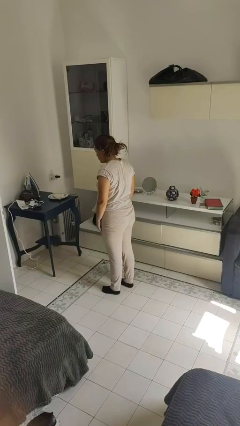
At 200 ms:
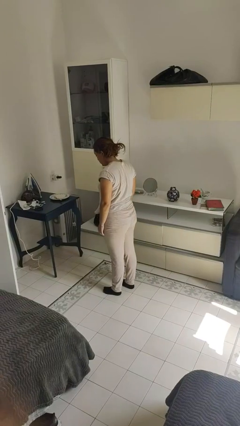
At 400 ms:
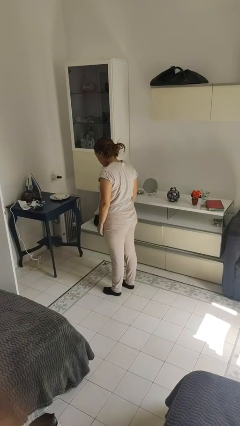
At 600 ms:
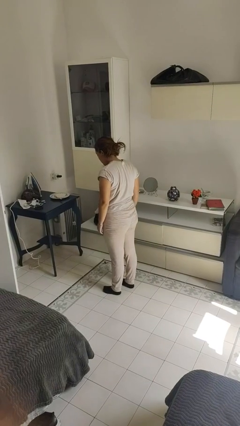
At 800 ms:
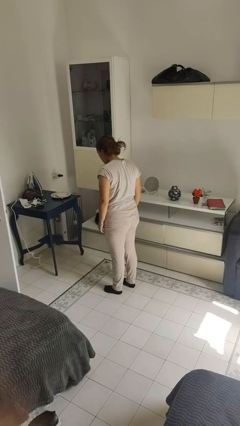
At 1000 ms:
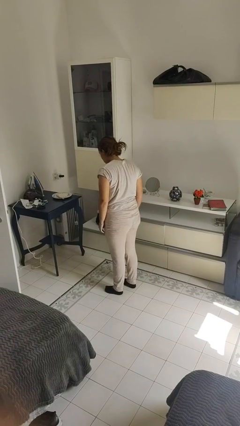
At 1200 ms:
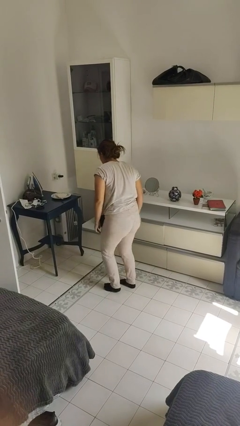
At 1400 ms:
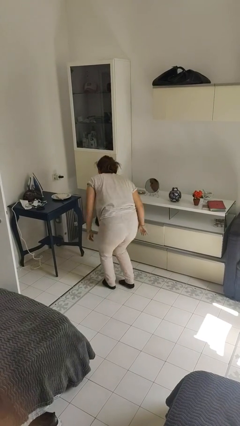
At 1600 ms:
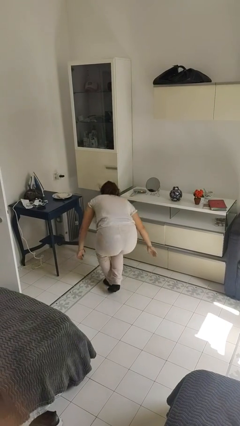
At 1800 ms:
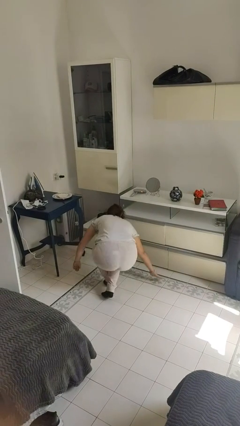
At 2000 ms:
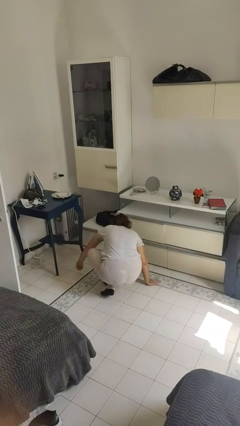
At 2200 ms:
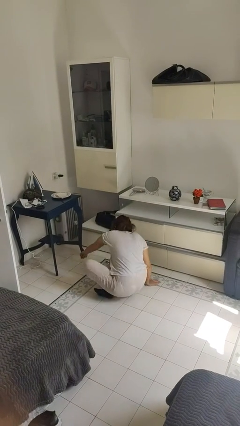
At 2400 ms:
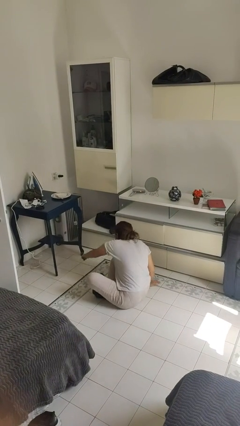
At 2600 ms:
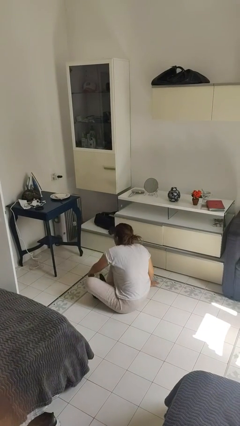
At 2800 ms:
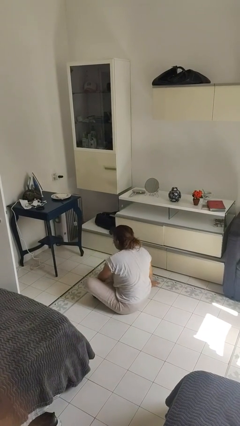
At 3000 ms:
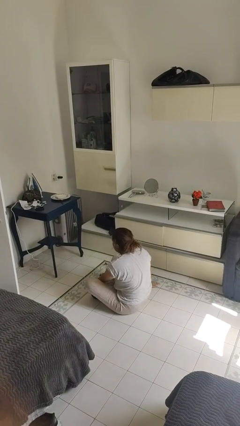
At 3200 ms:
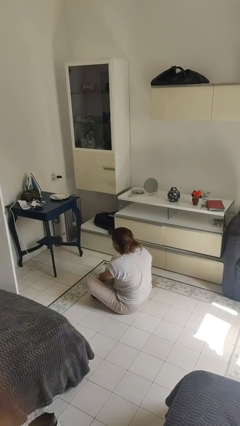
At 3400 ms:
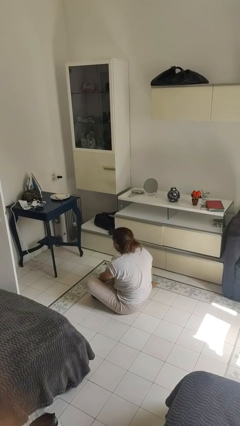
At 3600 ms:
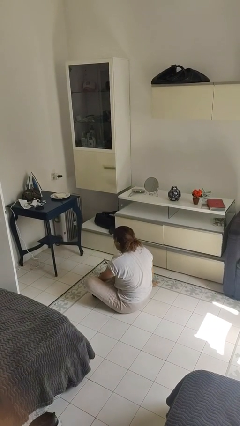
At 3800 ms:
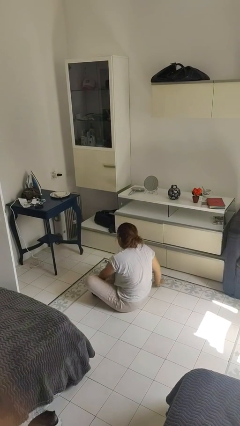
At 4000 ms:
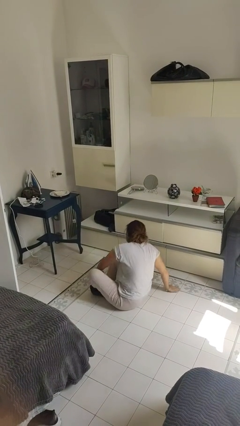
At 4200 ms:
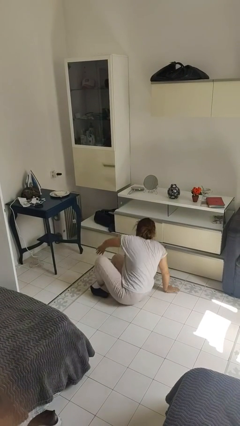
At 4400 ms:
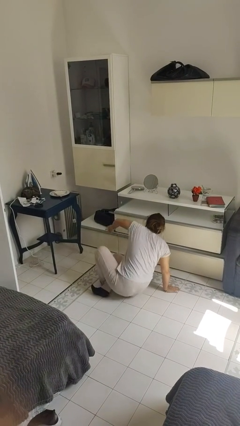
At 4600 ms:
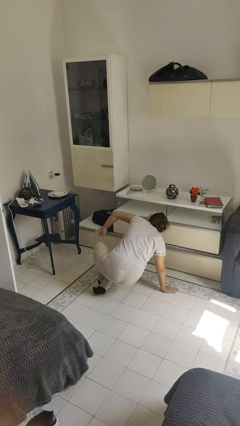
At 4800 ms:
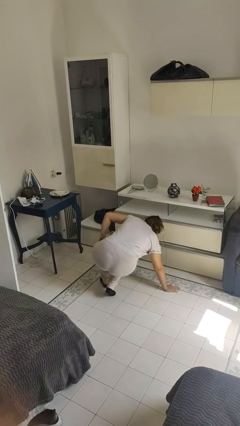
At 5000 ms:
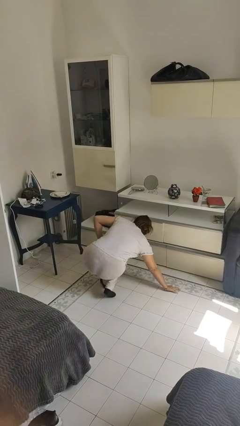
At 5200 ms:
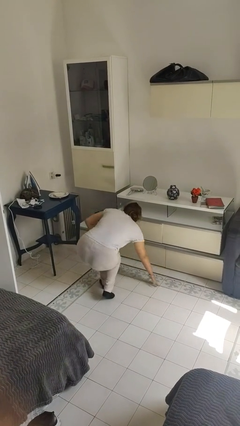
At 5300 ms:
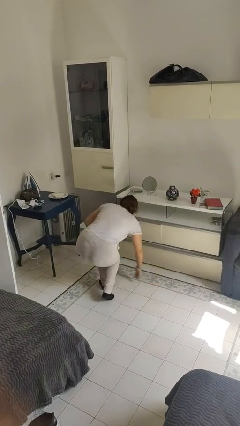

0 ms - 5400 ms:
person sits crisscross

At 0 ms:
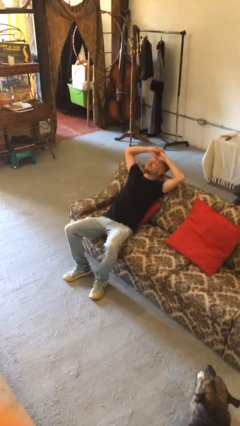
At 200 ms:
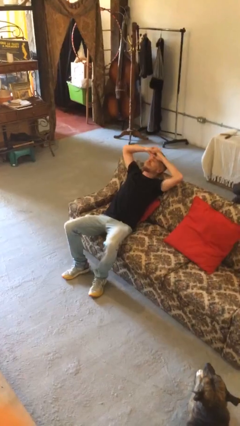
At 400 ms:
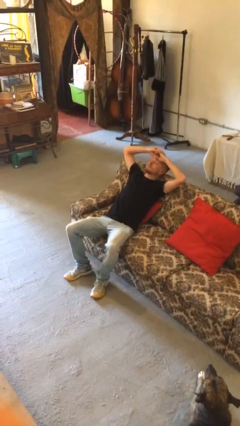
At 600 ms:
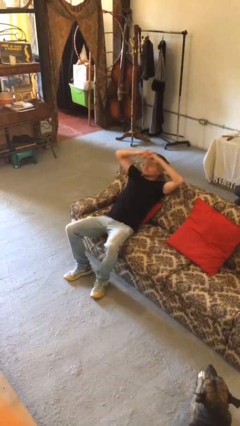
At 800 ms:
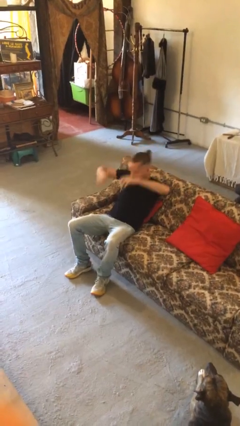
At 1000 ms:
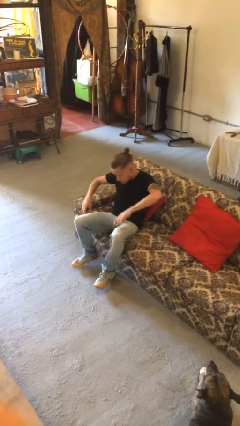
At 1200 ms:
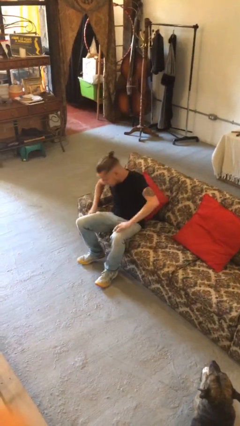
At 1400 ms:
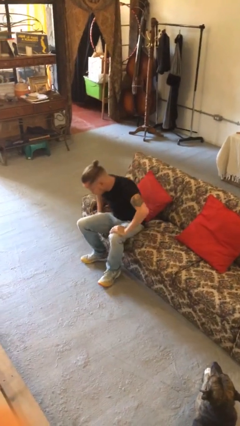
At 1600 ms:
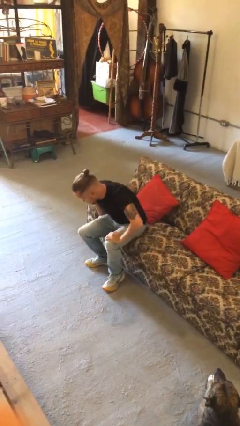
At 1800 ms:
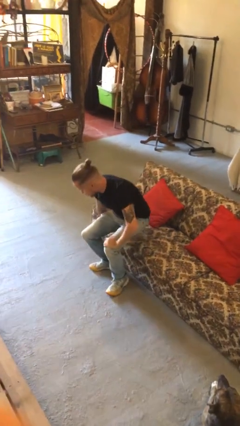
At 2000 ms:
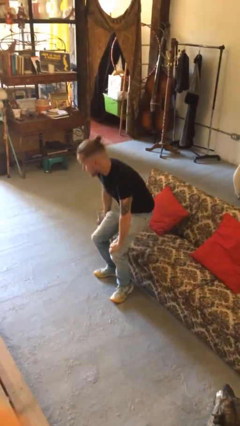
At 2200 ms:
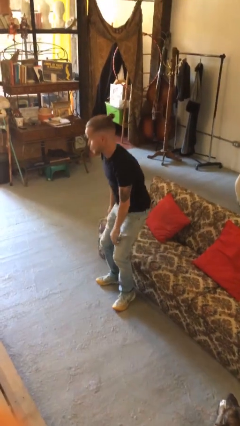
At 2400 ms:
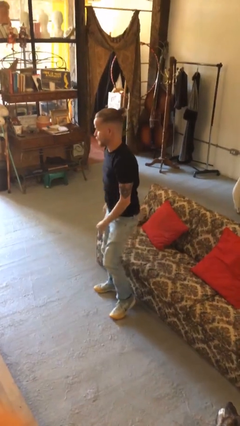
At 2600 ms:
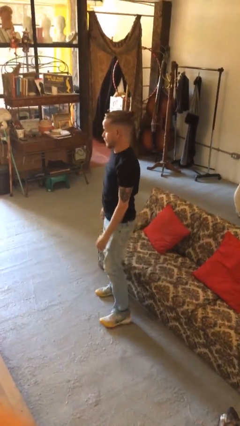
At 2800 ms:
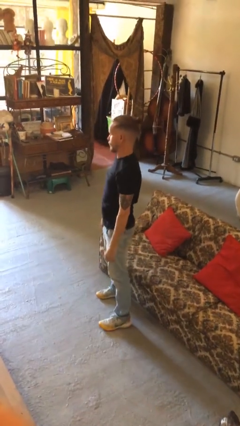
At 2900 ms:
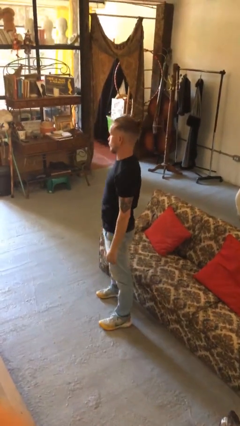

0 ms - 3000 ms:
person stands up

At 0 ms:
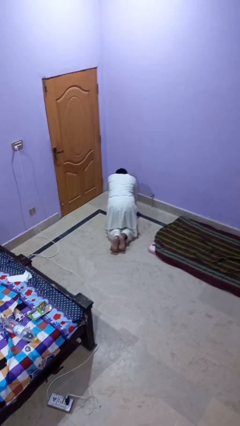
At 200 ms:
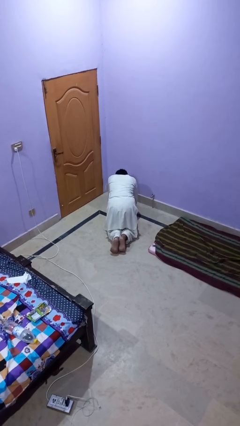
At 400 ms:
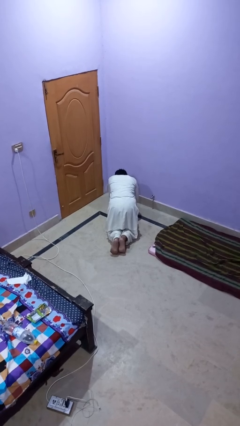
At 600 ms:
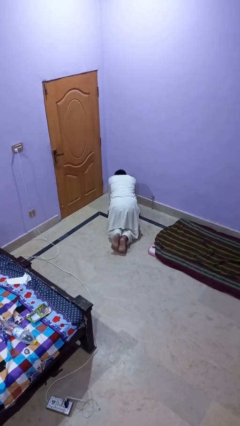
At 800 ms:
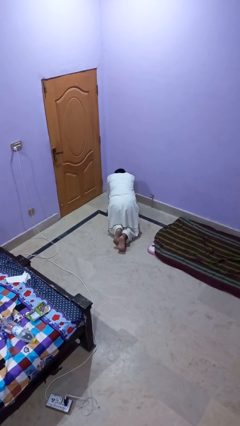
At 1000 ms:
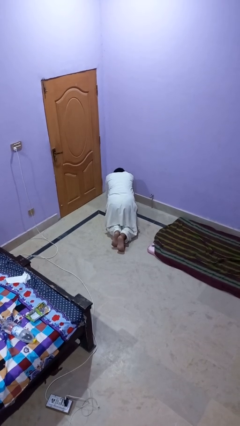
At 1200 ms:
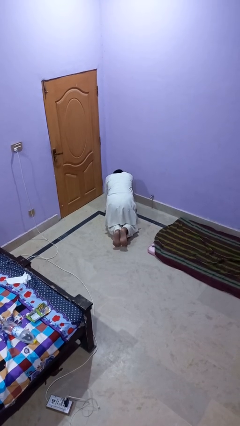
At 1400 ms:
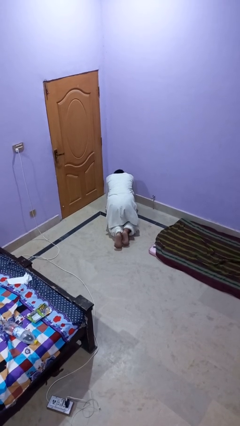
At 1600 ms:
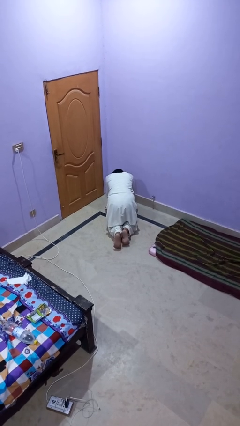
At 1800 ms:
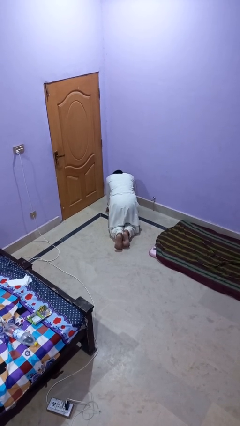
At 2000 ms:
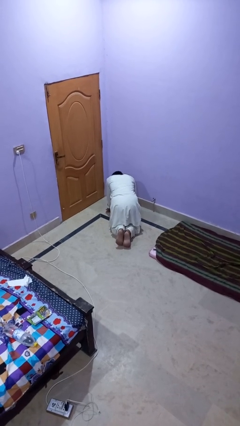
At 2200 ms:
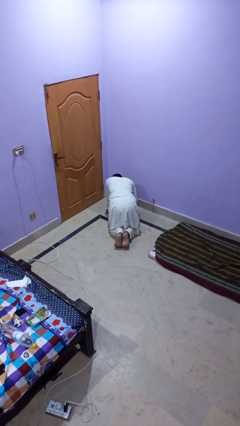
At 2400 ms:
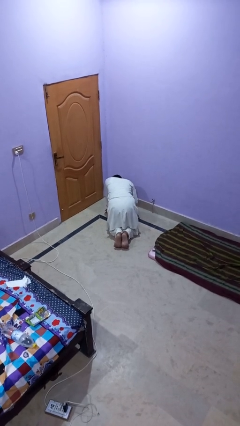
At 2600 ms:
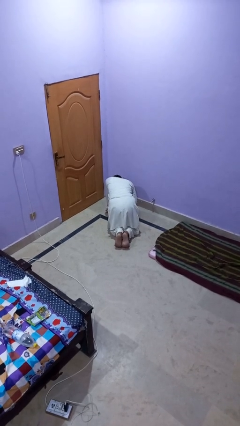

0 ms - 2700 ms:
person crawls

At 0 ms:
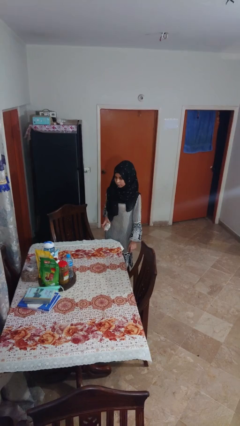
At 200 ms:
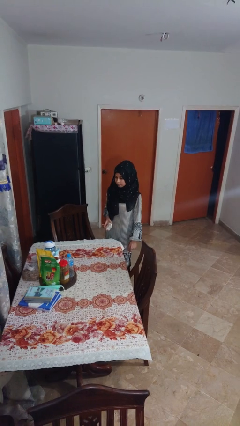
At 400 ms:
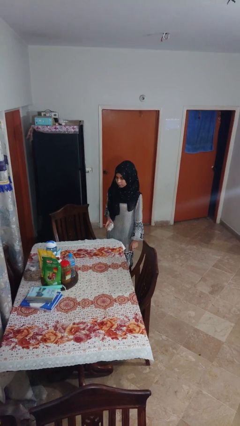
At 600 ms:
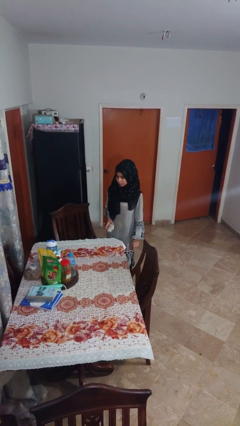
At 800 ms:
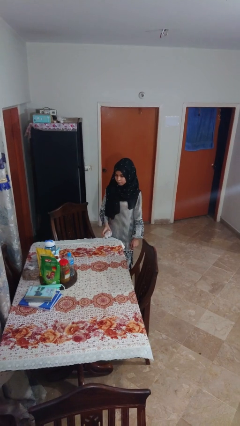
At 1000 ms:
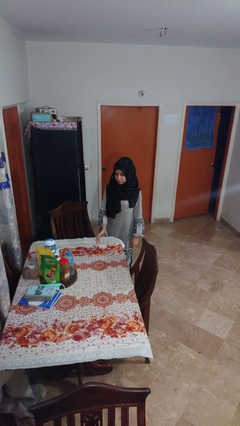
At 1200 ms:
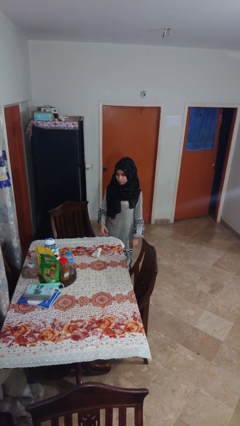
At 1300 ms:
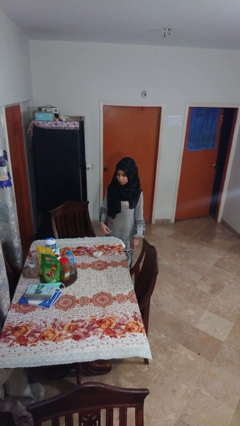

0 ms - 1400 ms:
person throws object on table

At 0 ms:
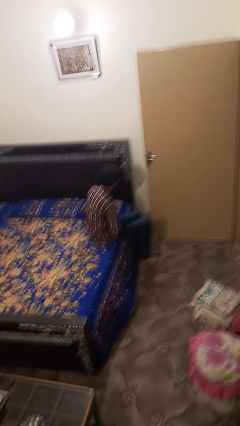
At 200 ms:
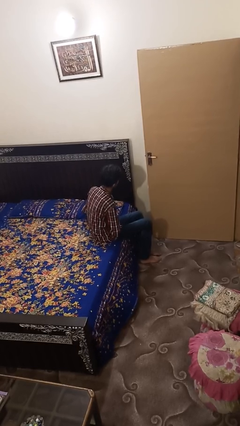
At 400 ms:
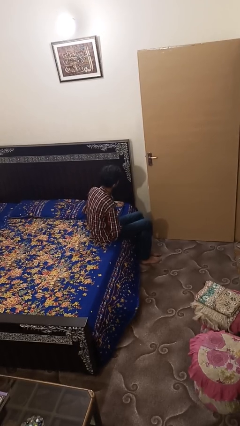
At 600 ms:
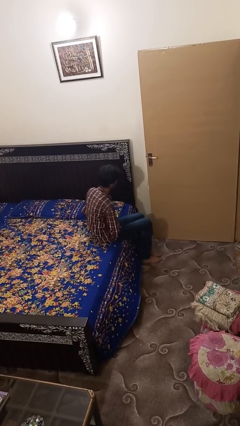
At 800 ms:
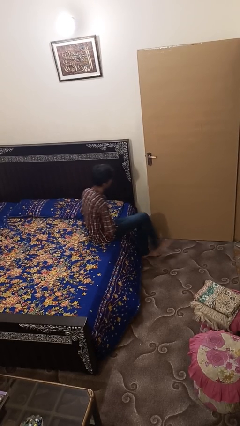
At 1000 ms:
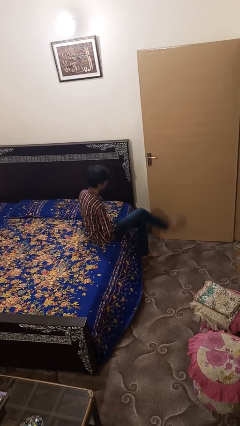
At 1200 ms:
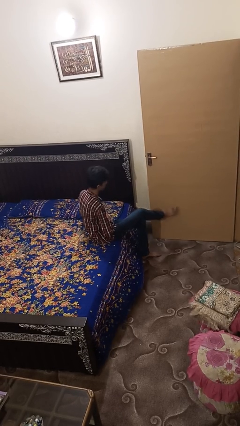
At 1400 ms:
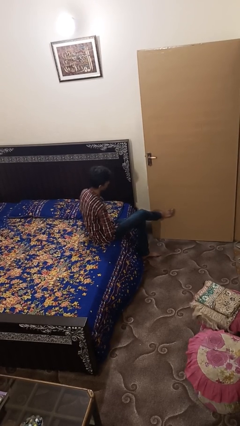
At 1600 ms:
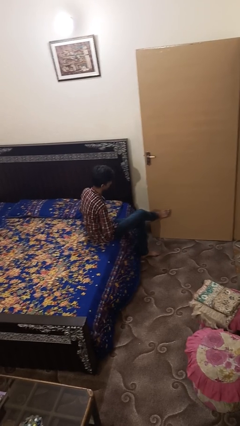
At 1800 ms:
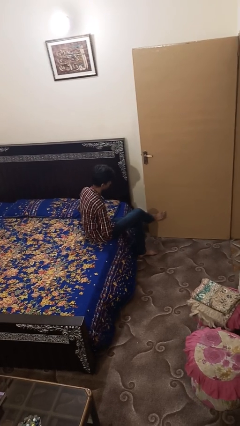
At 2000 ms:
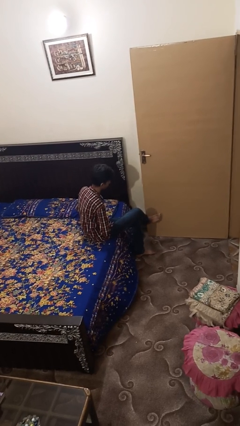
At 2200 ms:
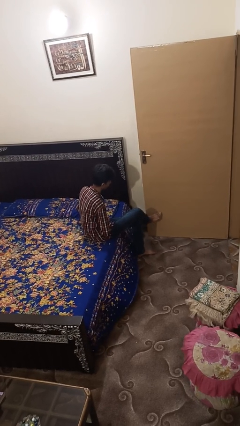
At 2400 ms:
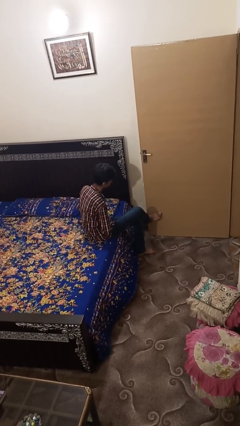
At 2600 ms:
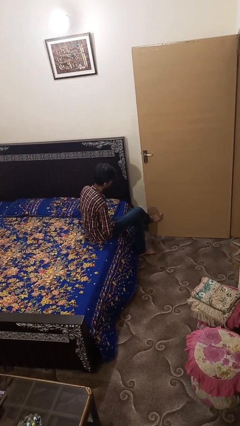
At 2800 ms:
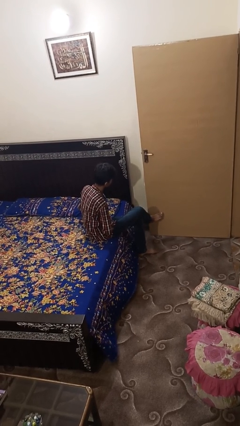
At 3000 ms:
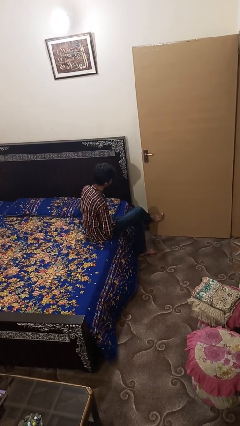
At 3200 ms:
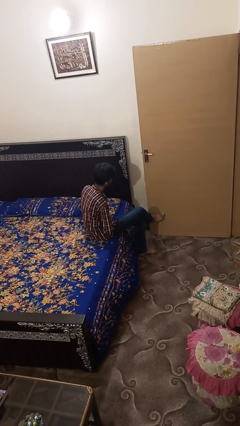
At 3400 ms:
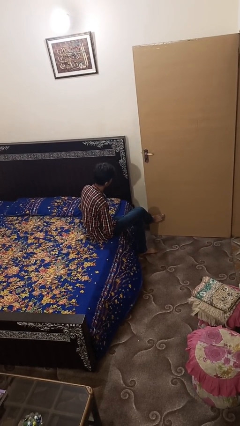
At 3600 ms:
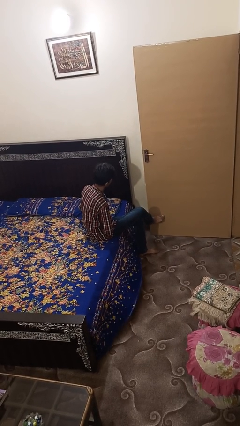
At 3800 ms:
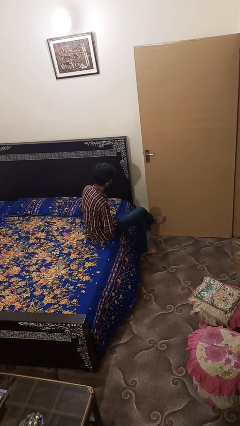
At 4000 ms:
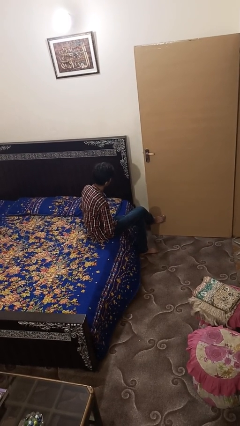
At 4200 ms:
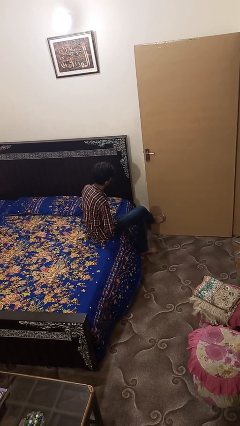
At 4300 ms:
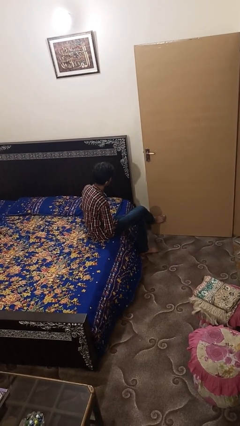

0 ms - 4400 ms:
person crosses legs

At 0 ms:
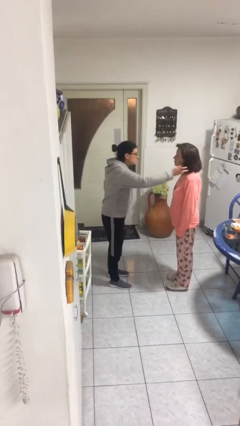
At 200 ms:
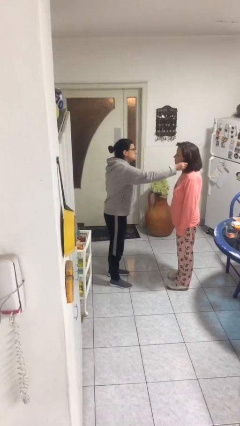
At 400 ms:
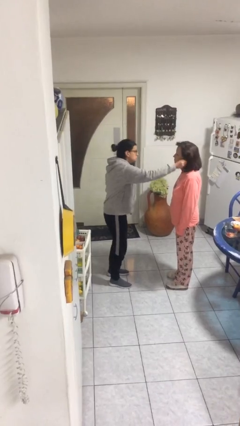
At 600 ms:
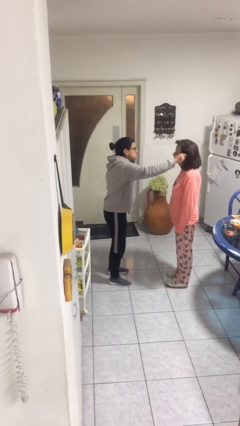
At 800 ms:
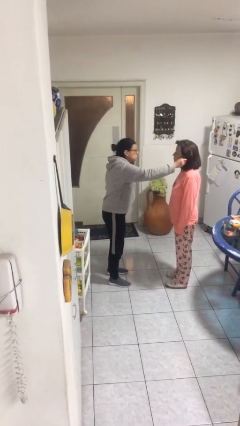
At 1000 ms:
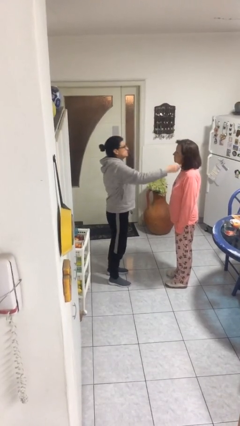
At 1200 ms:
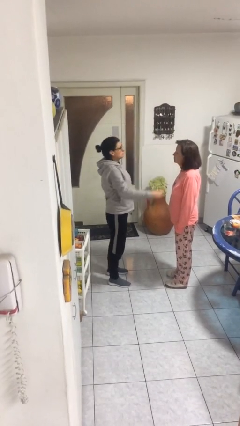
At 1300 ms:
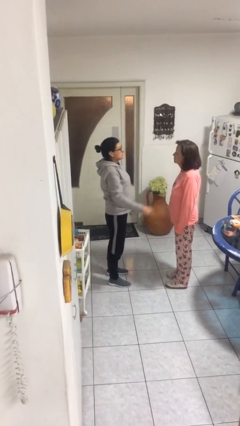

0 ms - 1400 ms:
person grabs person by hair
